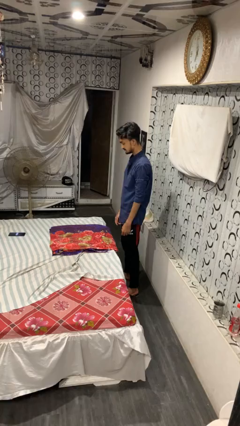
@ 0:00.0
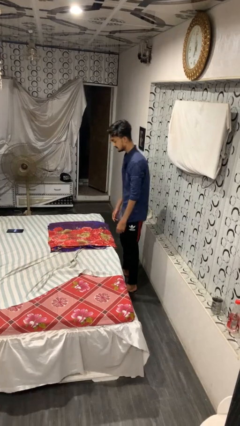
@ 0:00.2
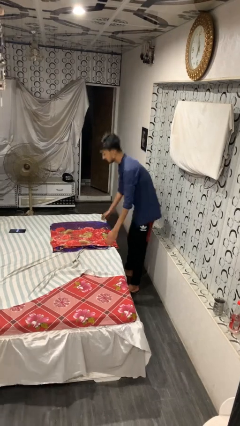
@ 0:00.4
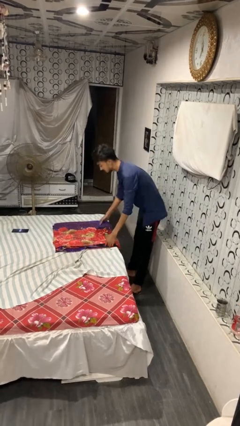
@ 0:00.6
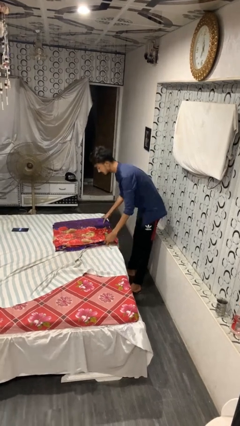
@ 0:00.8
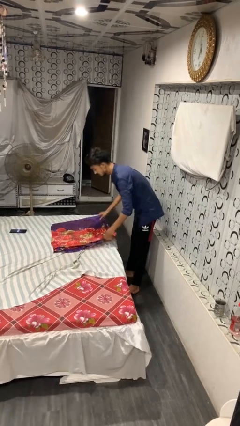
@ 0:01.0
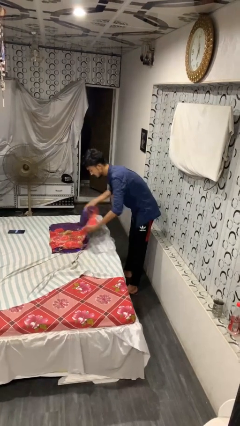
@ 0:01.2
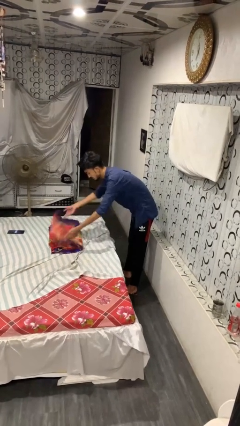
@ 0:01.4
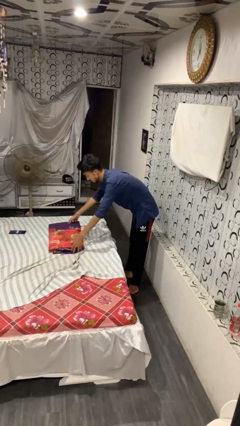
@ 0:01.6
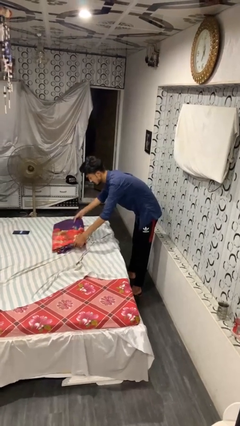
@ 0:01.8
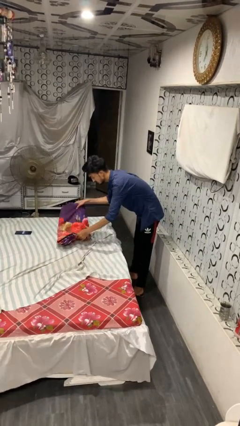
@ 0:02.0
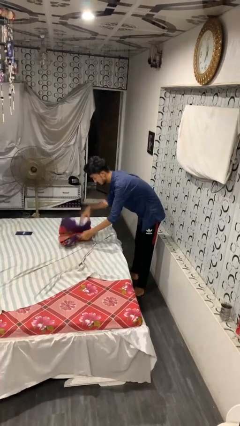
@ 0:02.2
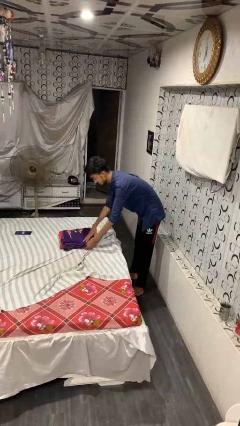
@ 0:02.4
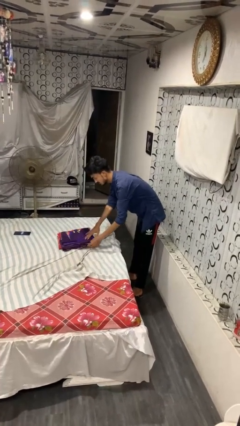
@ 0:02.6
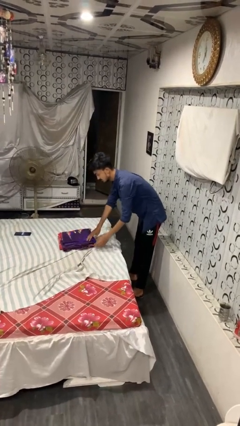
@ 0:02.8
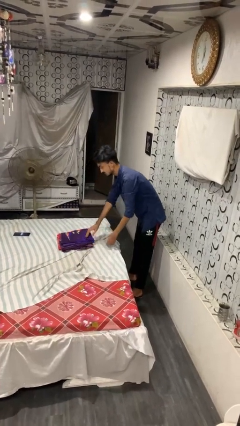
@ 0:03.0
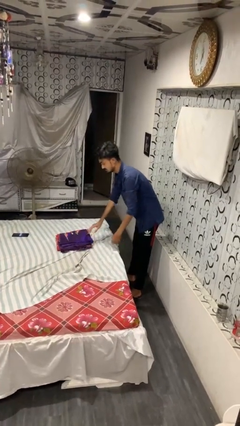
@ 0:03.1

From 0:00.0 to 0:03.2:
person folds blanket

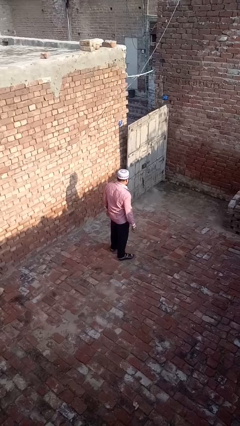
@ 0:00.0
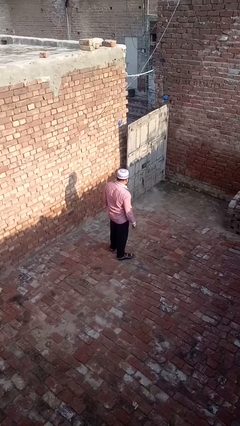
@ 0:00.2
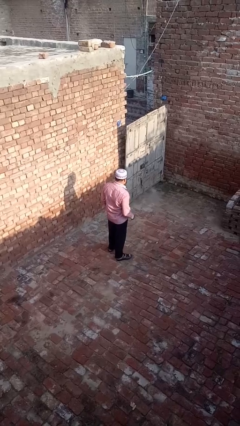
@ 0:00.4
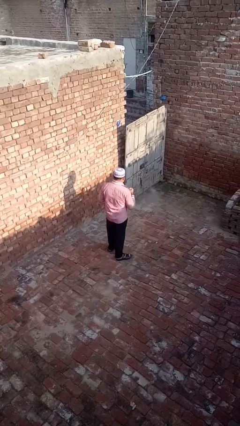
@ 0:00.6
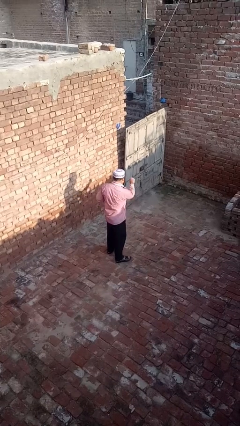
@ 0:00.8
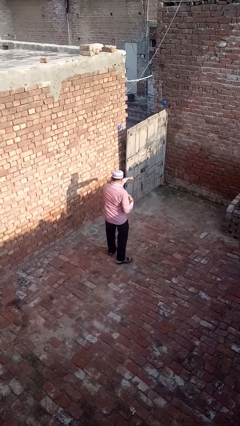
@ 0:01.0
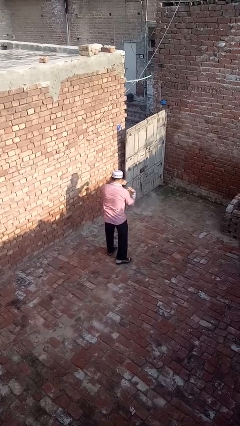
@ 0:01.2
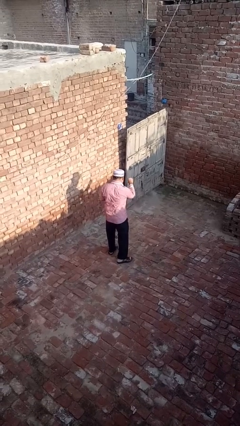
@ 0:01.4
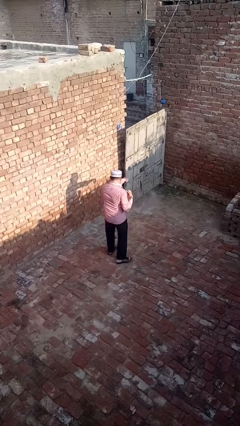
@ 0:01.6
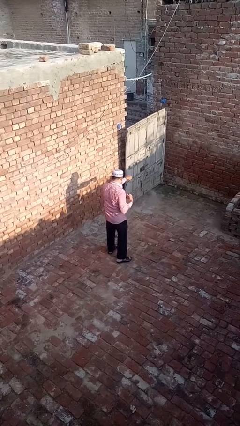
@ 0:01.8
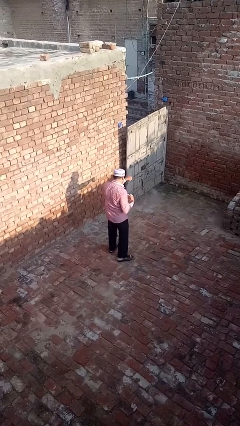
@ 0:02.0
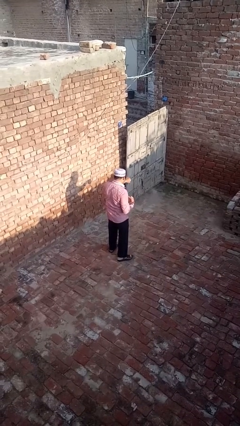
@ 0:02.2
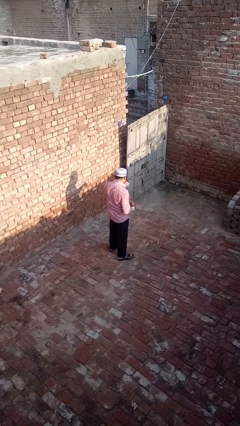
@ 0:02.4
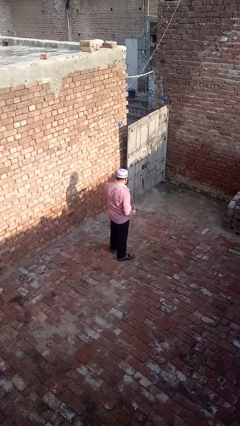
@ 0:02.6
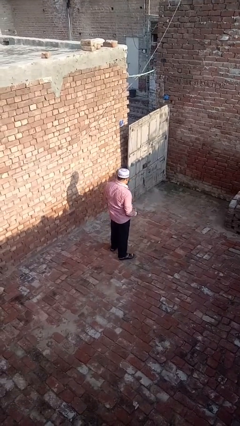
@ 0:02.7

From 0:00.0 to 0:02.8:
person punches

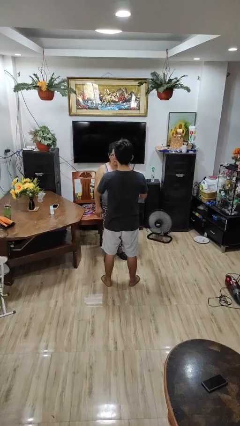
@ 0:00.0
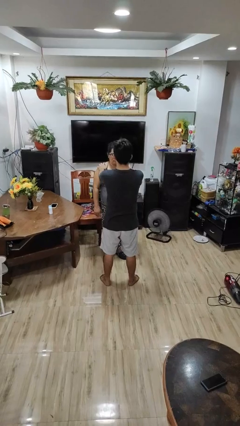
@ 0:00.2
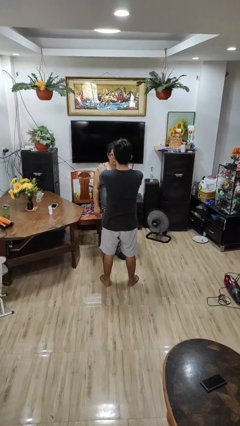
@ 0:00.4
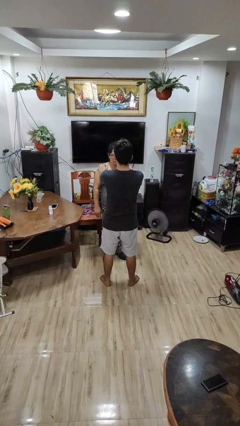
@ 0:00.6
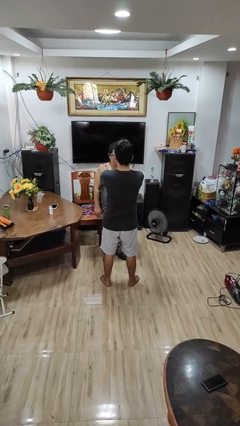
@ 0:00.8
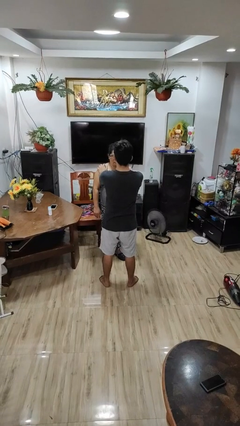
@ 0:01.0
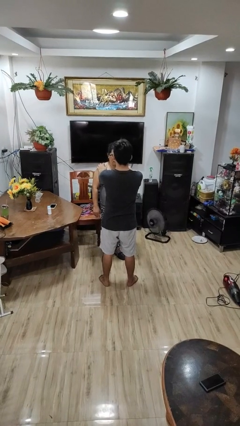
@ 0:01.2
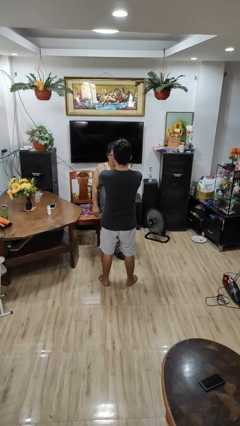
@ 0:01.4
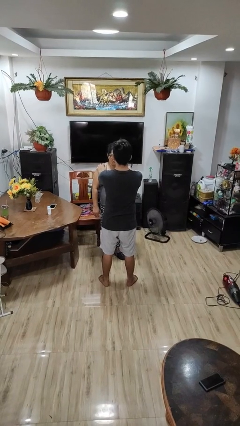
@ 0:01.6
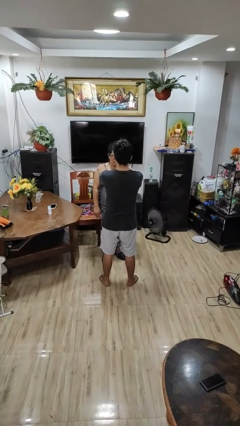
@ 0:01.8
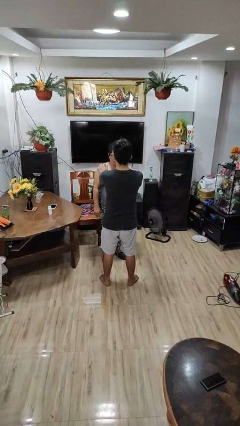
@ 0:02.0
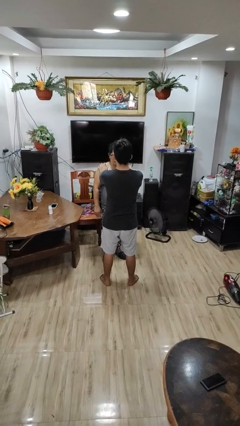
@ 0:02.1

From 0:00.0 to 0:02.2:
person grabs person by shoulder

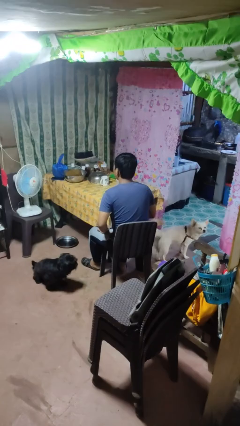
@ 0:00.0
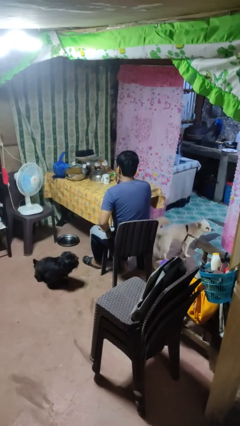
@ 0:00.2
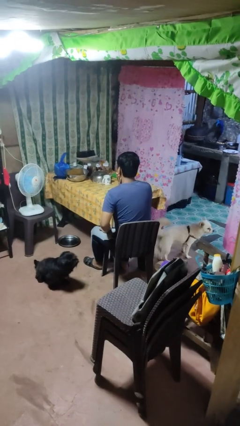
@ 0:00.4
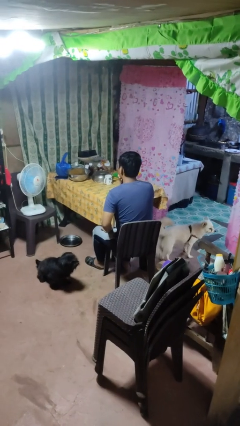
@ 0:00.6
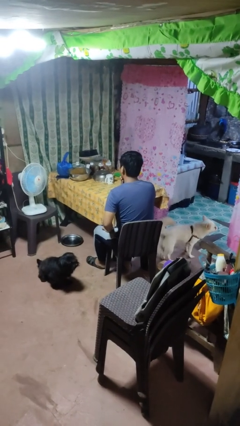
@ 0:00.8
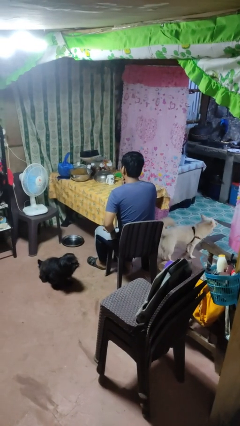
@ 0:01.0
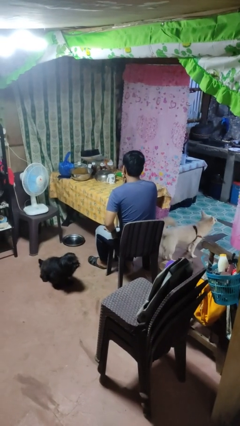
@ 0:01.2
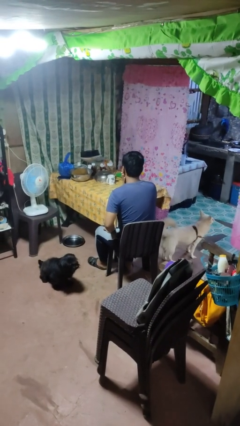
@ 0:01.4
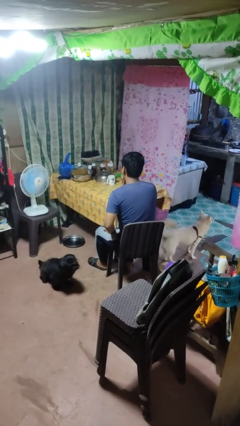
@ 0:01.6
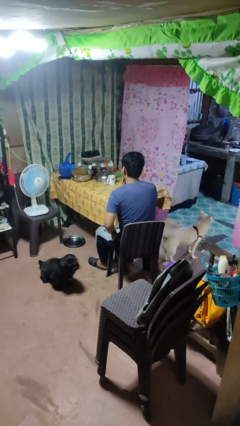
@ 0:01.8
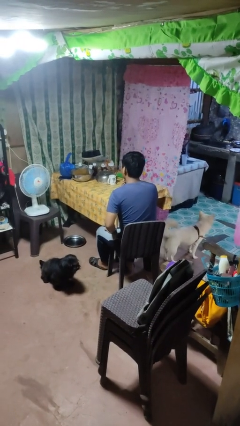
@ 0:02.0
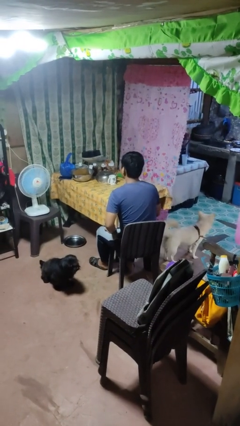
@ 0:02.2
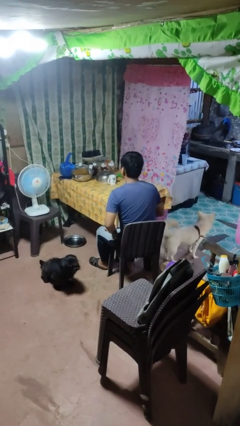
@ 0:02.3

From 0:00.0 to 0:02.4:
person strokes chin

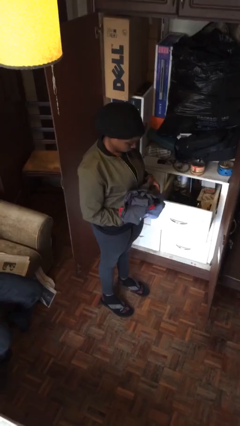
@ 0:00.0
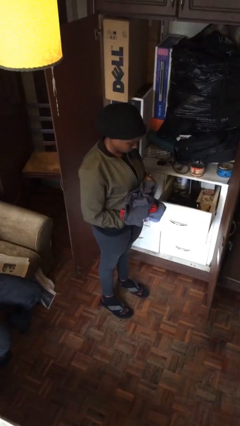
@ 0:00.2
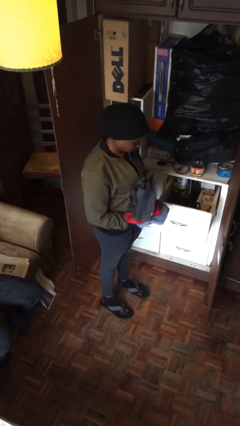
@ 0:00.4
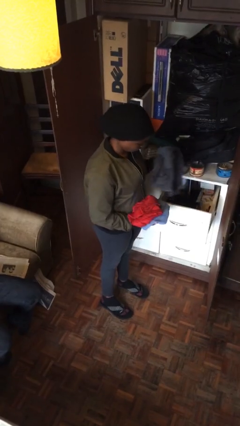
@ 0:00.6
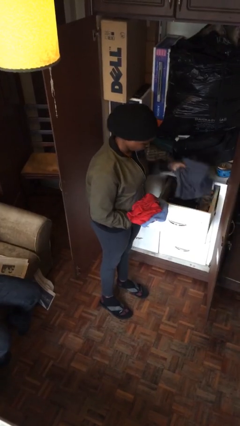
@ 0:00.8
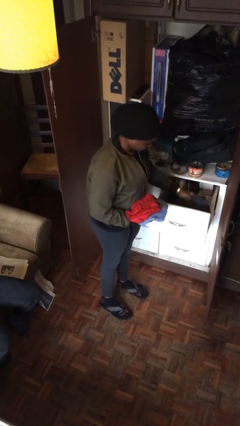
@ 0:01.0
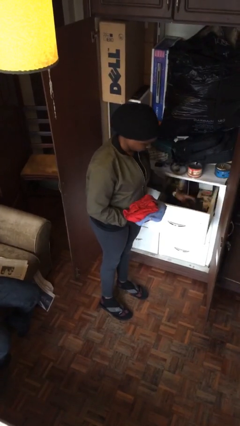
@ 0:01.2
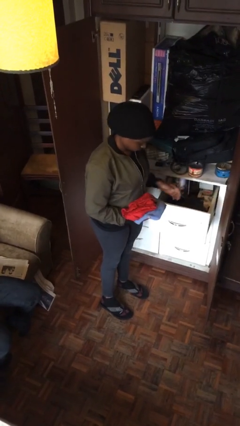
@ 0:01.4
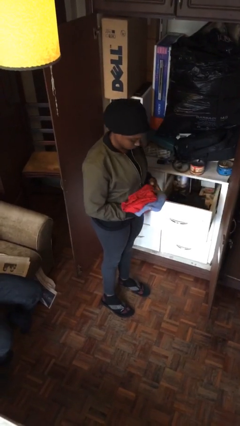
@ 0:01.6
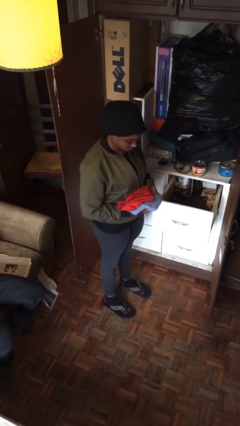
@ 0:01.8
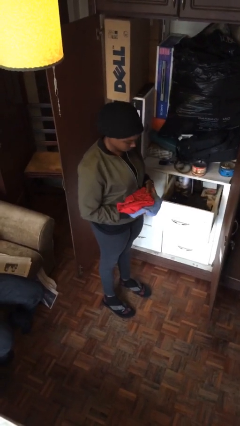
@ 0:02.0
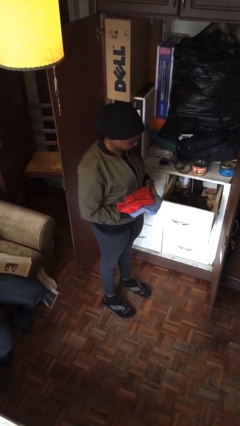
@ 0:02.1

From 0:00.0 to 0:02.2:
person puts clothes into dresser

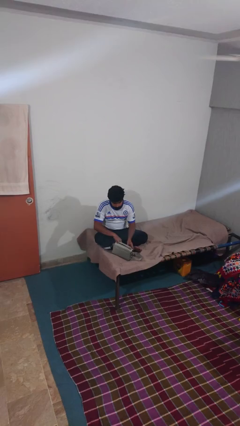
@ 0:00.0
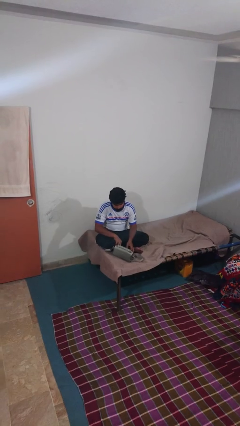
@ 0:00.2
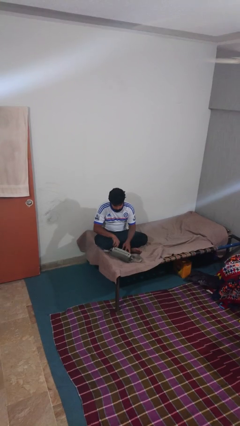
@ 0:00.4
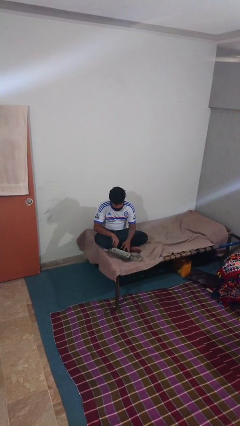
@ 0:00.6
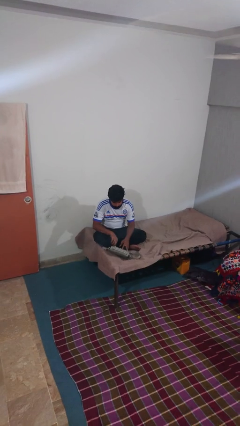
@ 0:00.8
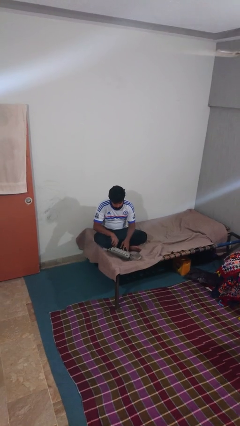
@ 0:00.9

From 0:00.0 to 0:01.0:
person searches in purse

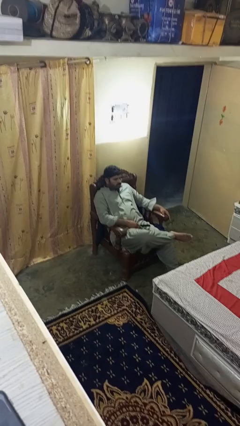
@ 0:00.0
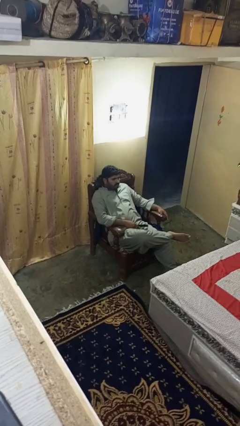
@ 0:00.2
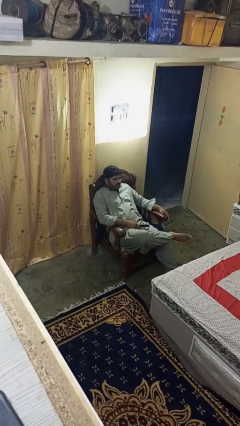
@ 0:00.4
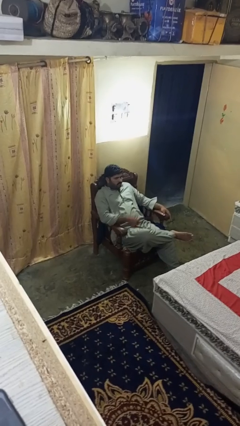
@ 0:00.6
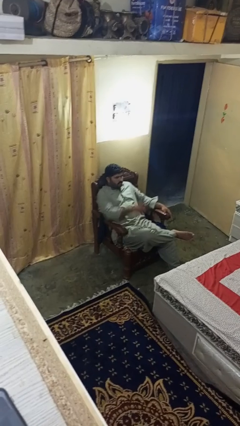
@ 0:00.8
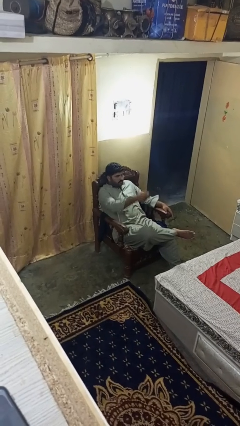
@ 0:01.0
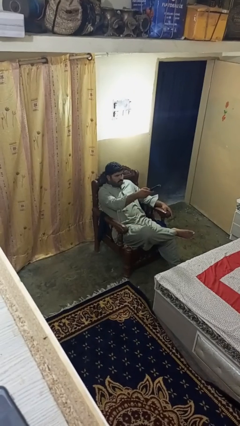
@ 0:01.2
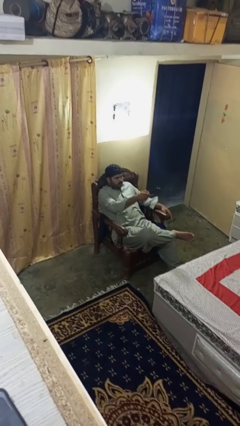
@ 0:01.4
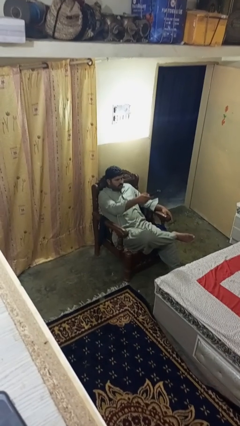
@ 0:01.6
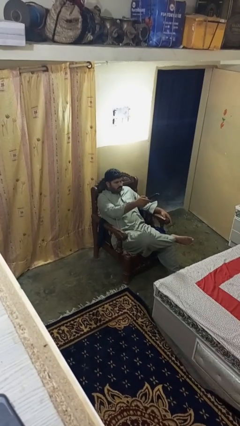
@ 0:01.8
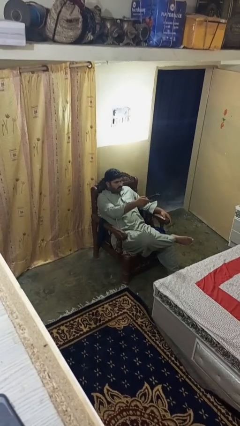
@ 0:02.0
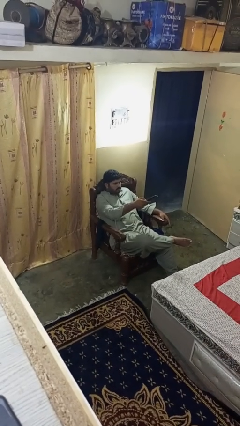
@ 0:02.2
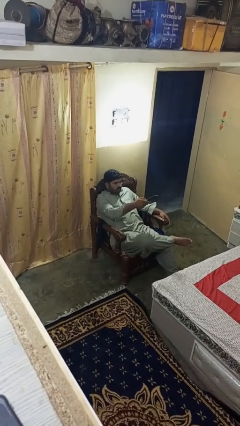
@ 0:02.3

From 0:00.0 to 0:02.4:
person uses television remote

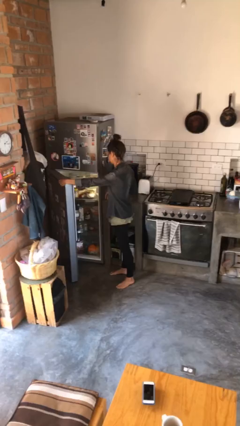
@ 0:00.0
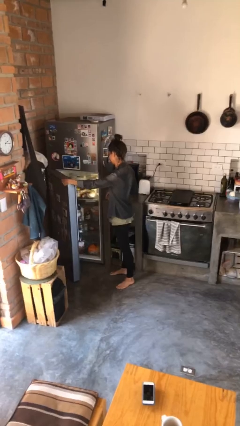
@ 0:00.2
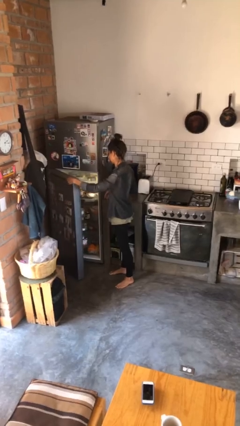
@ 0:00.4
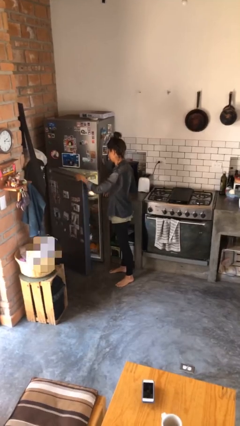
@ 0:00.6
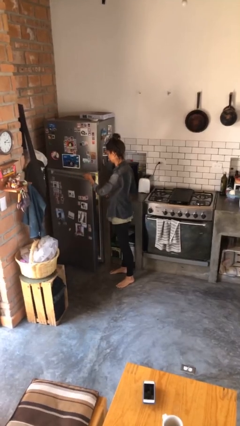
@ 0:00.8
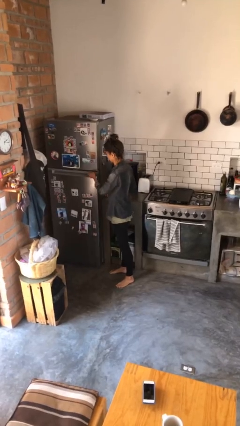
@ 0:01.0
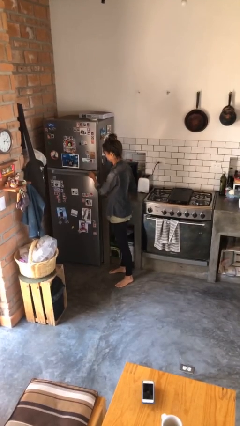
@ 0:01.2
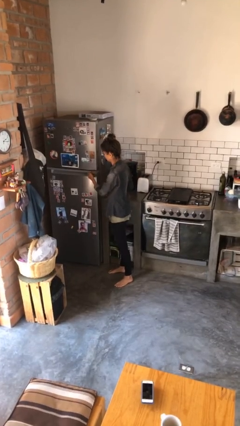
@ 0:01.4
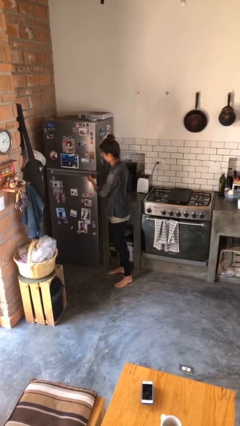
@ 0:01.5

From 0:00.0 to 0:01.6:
person closes refrigerator
